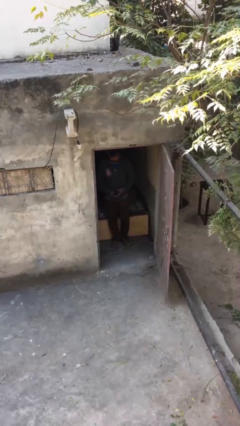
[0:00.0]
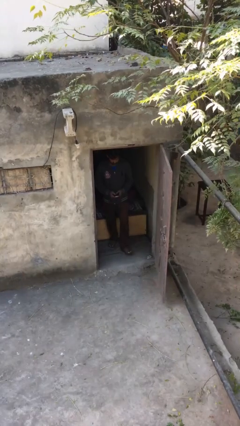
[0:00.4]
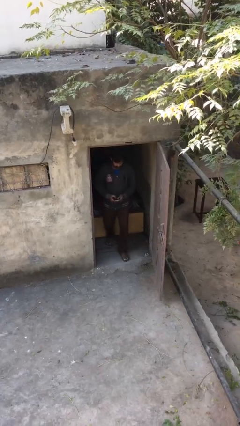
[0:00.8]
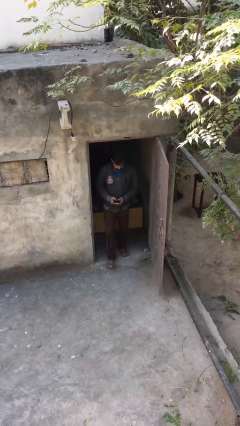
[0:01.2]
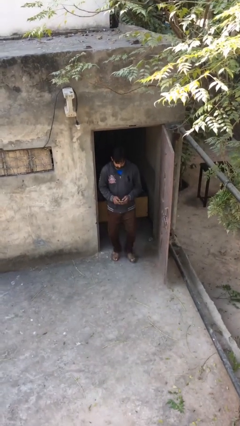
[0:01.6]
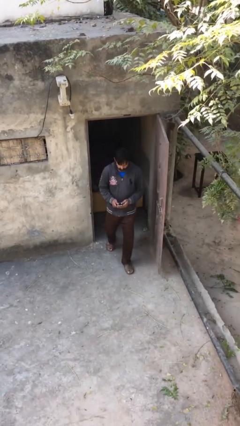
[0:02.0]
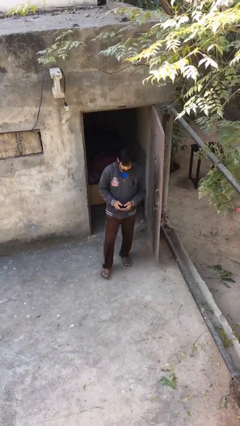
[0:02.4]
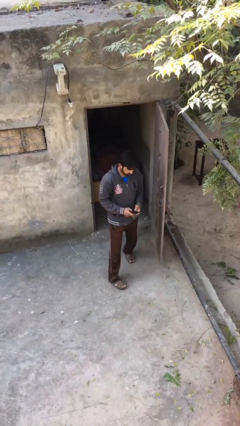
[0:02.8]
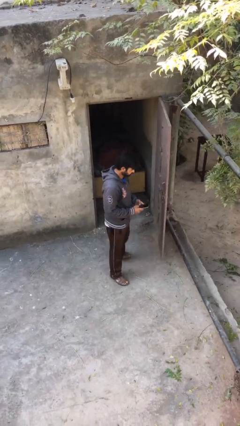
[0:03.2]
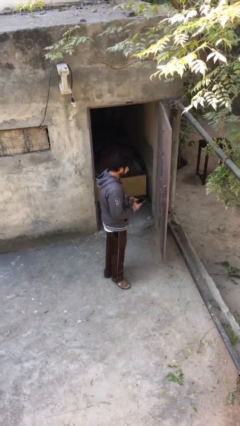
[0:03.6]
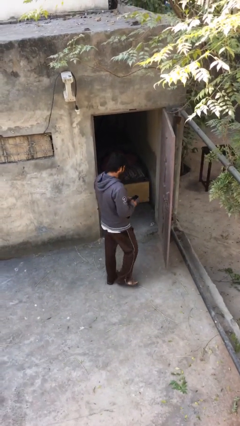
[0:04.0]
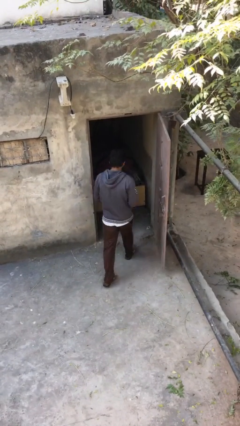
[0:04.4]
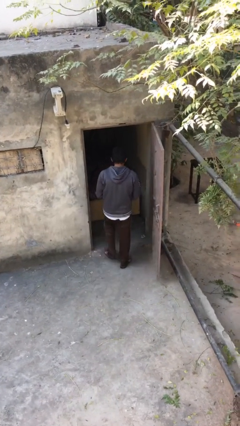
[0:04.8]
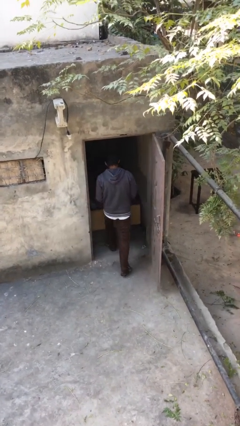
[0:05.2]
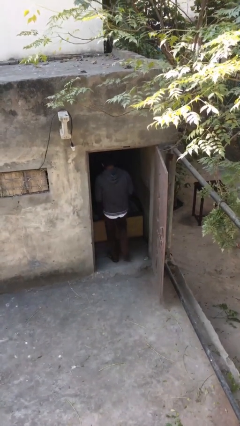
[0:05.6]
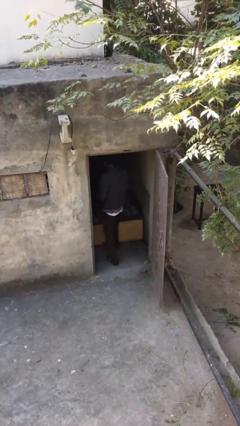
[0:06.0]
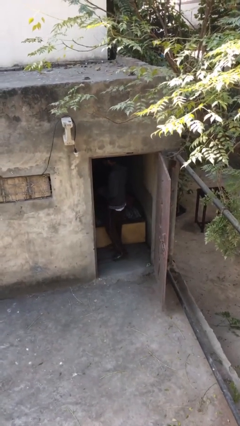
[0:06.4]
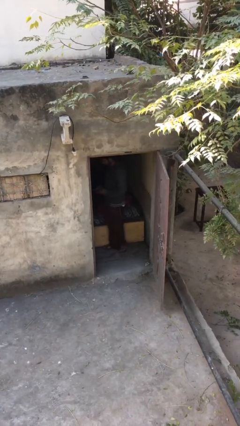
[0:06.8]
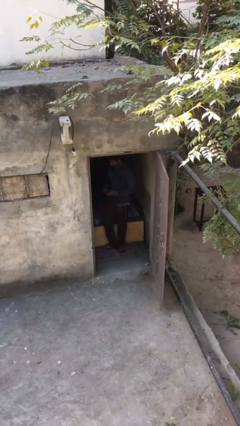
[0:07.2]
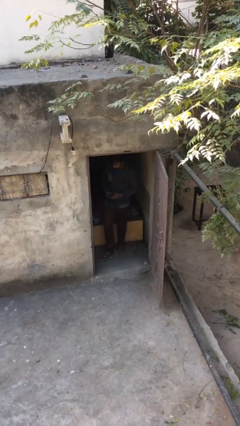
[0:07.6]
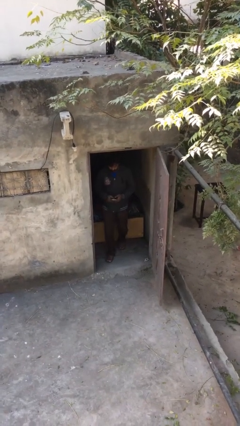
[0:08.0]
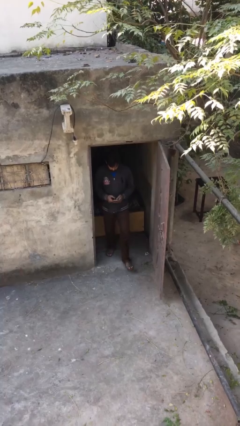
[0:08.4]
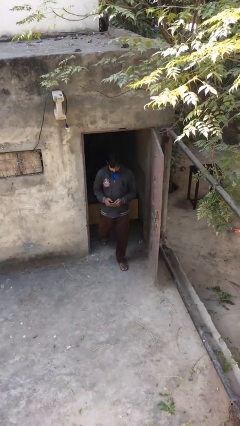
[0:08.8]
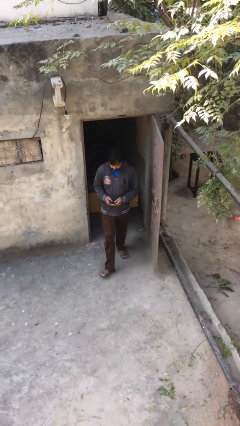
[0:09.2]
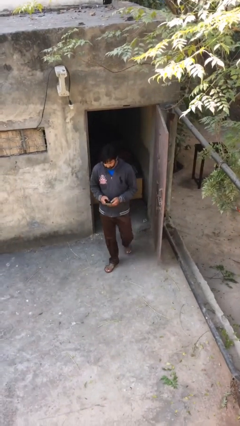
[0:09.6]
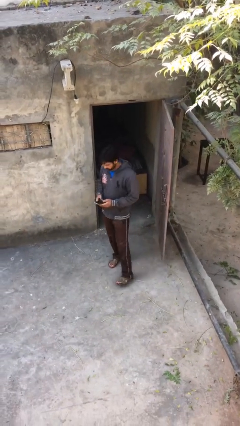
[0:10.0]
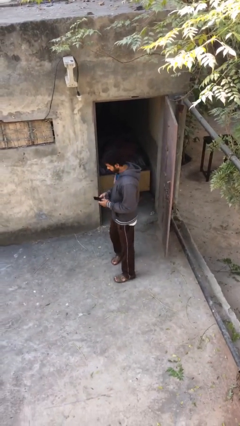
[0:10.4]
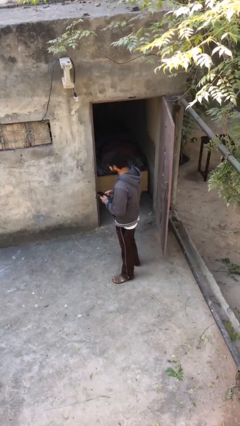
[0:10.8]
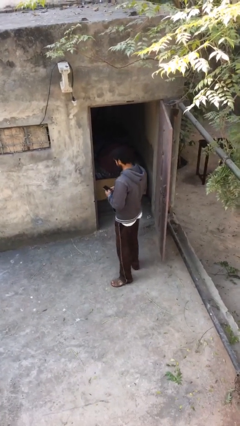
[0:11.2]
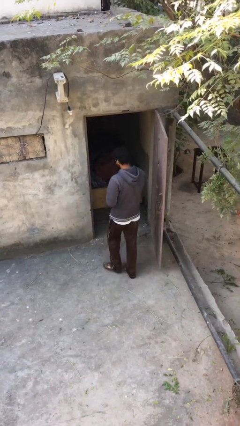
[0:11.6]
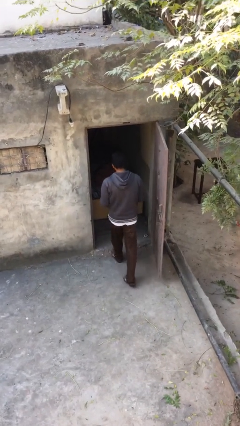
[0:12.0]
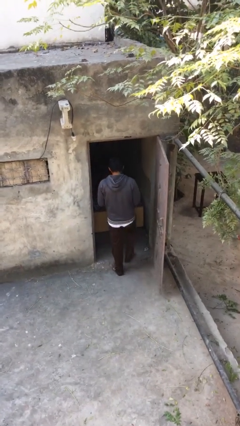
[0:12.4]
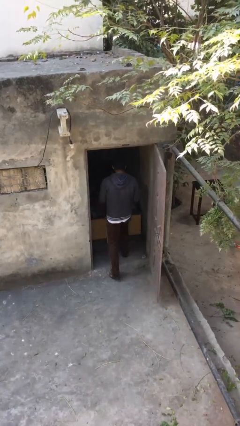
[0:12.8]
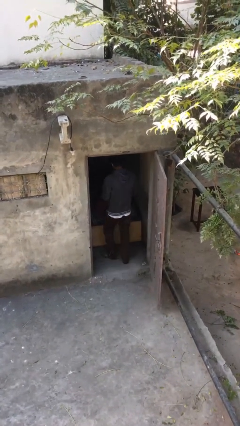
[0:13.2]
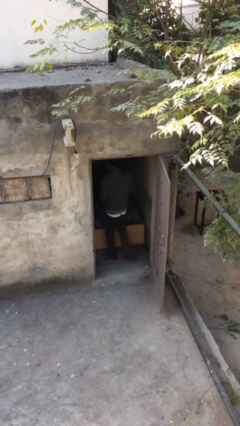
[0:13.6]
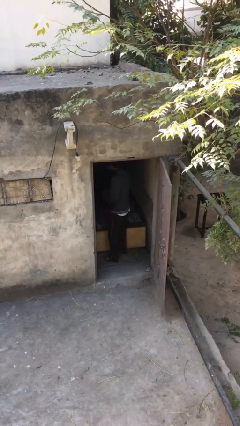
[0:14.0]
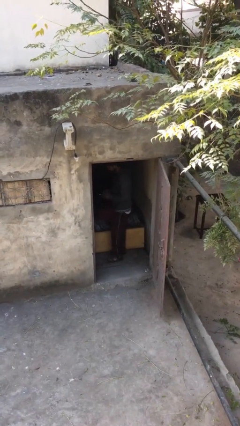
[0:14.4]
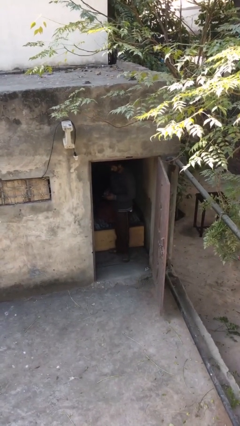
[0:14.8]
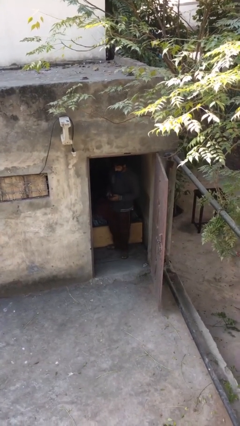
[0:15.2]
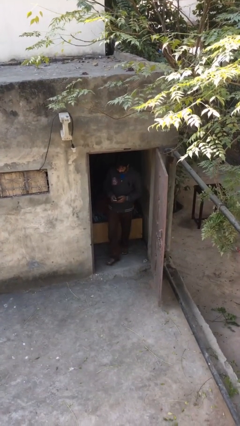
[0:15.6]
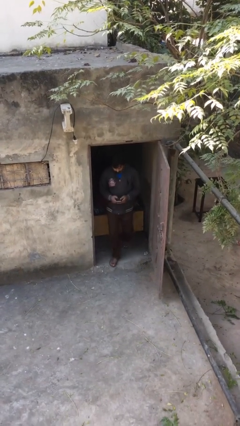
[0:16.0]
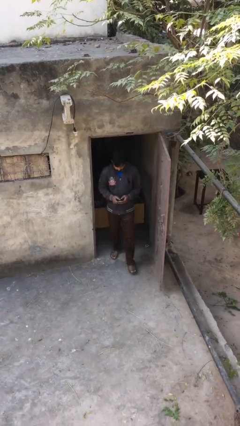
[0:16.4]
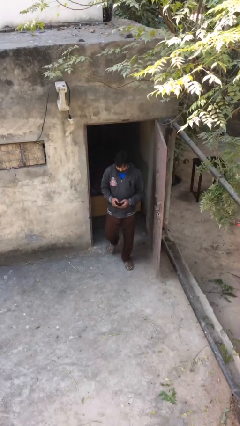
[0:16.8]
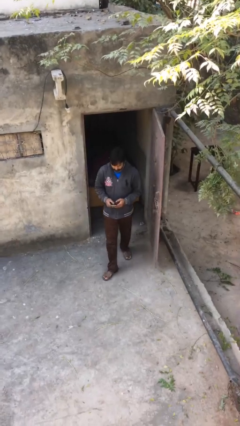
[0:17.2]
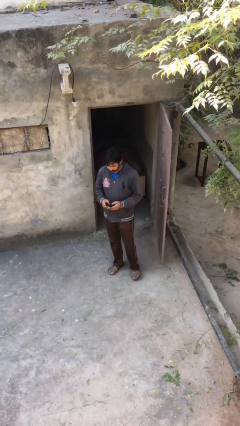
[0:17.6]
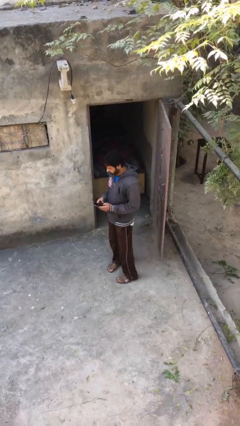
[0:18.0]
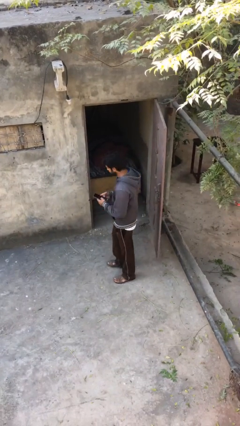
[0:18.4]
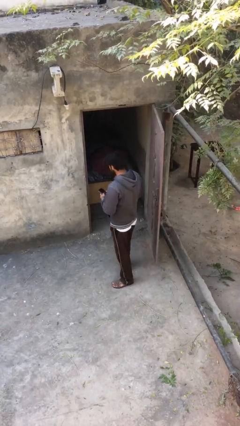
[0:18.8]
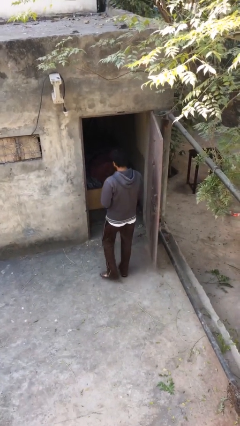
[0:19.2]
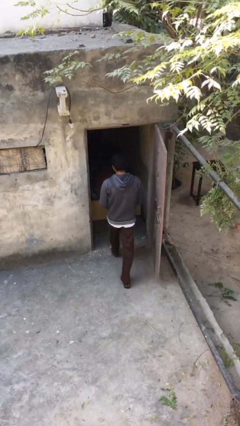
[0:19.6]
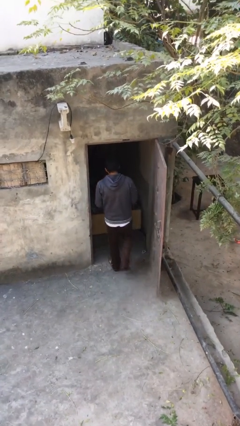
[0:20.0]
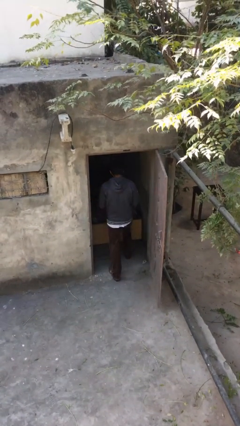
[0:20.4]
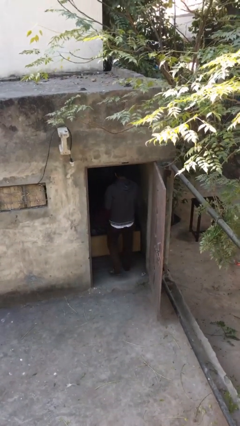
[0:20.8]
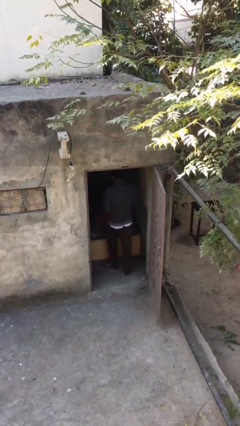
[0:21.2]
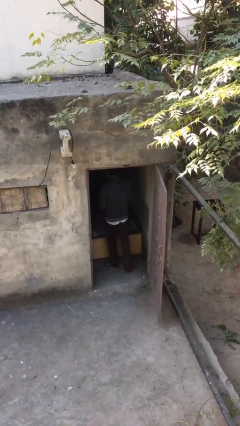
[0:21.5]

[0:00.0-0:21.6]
person texts on phone

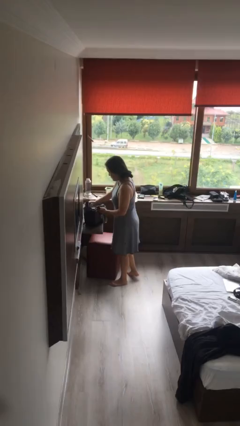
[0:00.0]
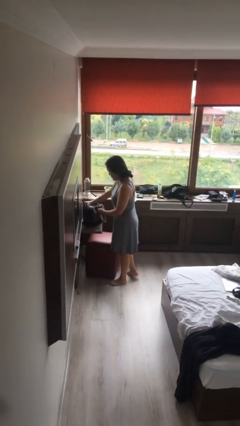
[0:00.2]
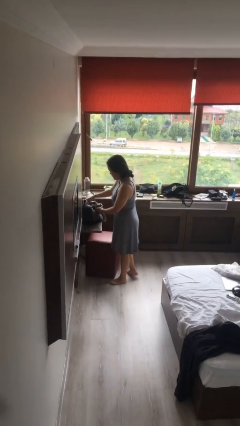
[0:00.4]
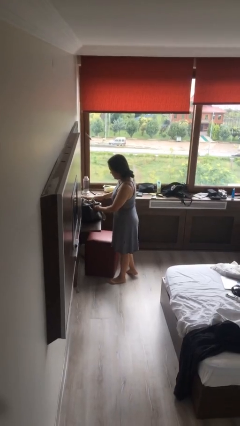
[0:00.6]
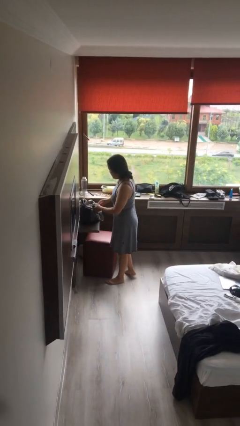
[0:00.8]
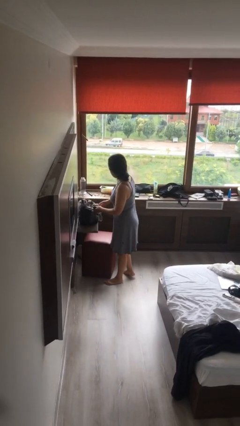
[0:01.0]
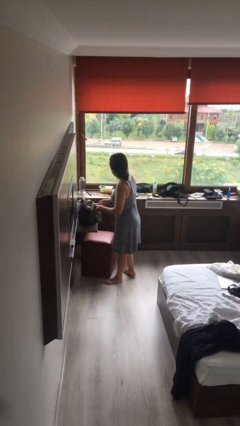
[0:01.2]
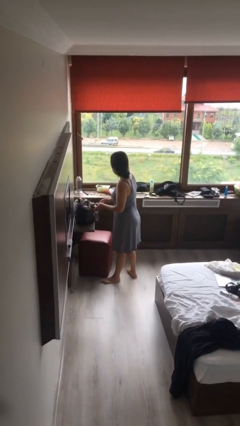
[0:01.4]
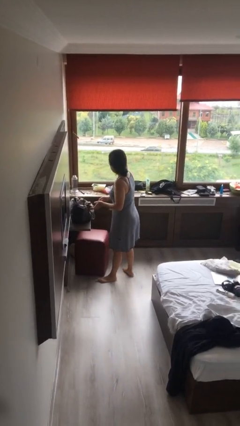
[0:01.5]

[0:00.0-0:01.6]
person puts down object on table

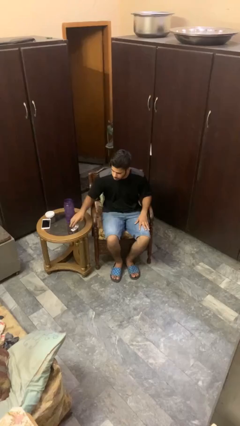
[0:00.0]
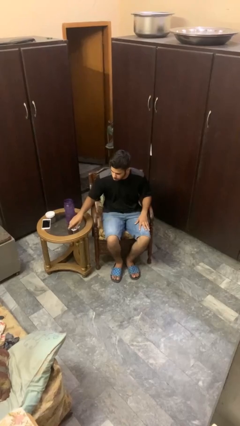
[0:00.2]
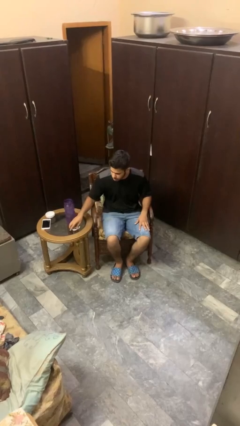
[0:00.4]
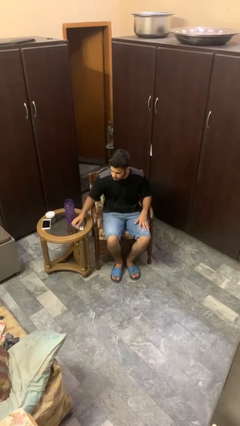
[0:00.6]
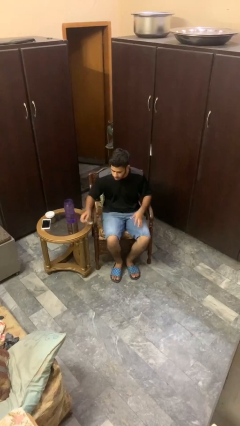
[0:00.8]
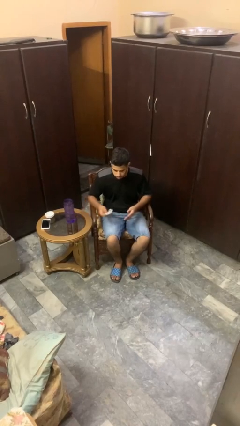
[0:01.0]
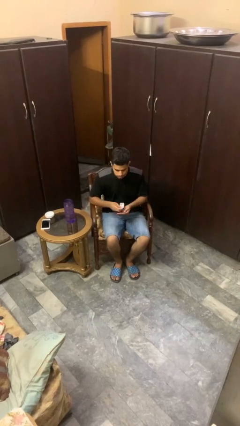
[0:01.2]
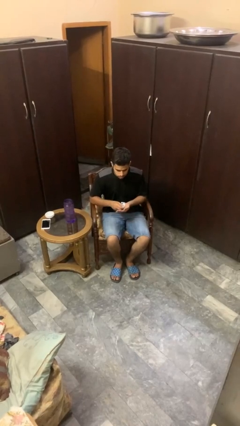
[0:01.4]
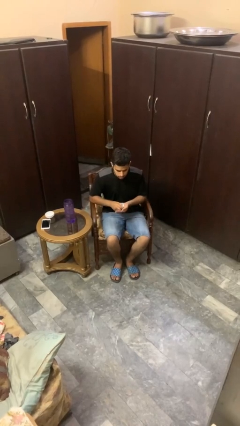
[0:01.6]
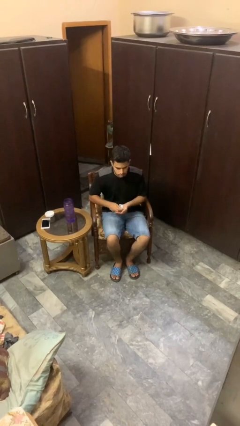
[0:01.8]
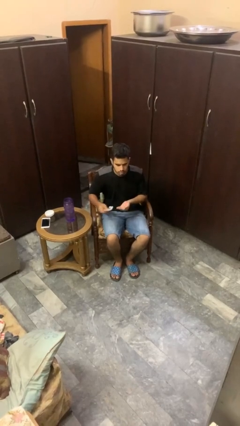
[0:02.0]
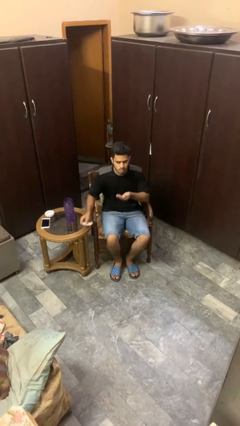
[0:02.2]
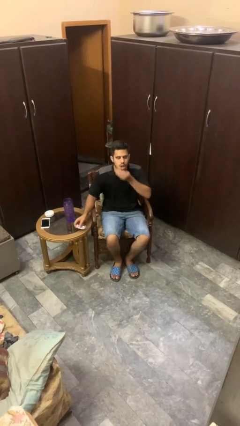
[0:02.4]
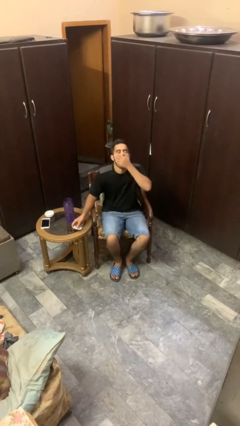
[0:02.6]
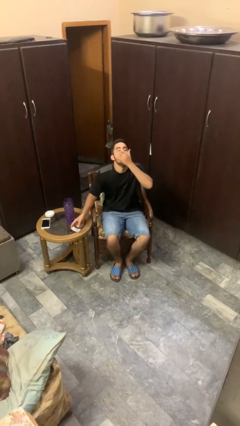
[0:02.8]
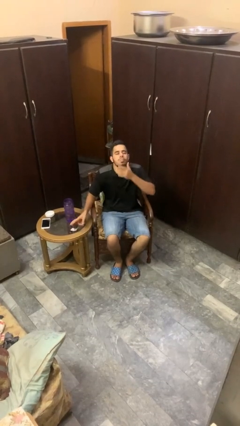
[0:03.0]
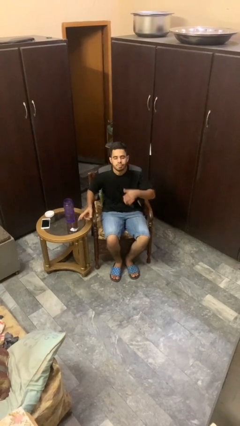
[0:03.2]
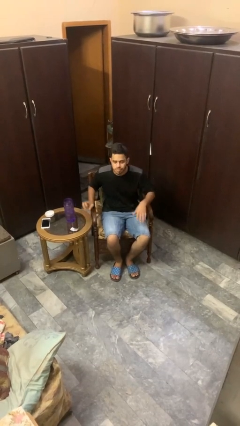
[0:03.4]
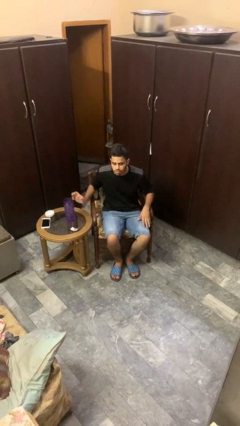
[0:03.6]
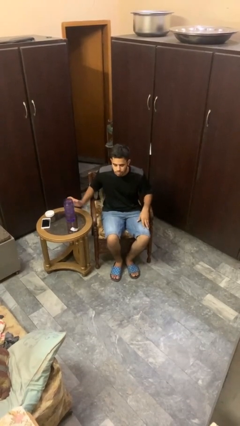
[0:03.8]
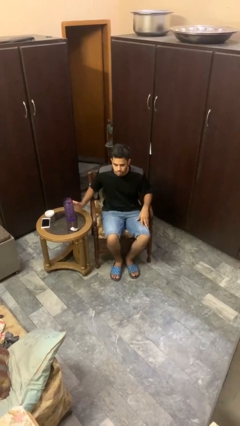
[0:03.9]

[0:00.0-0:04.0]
person takes medicine pills

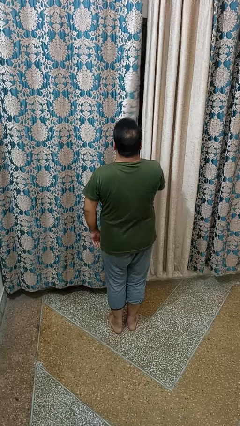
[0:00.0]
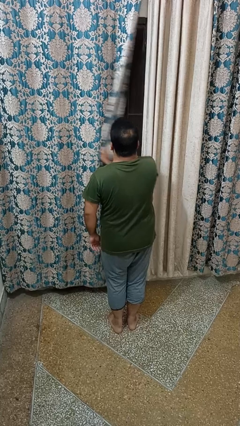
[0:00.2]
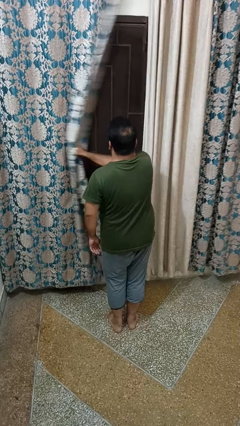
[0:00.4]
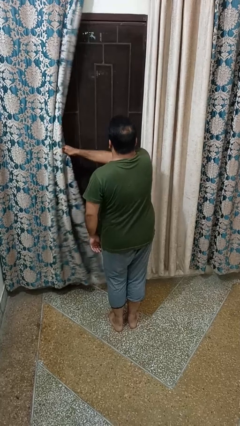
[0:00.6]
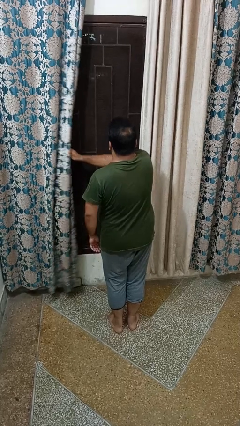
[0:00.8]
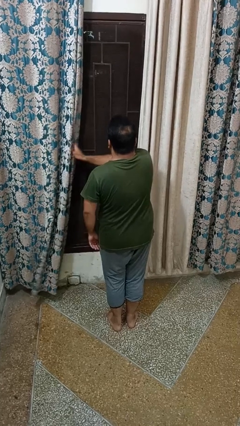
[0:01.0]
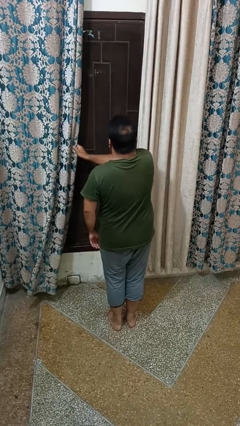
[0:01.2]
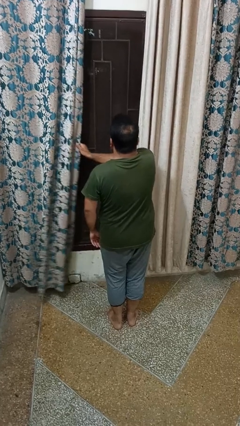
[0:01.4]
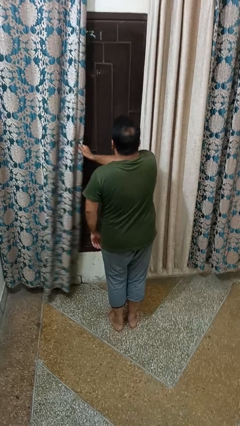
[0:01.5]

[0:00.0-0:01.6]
person opens curtains
